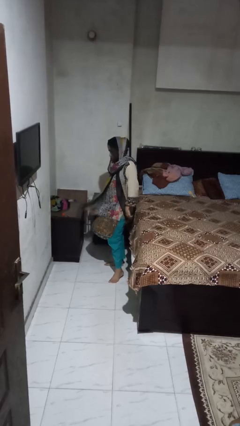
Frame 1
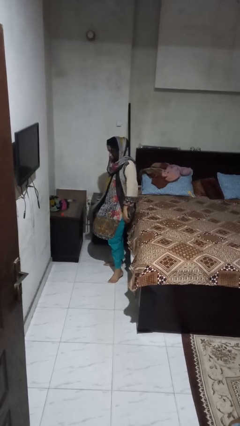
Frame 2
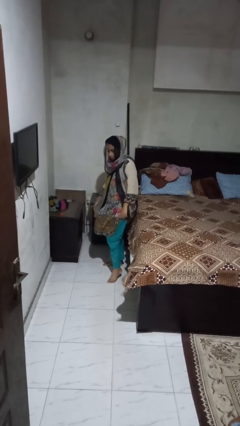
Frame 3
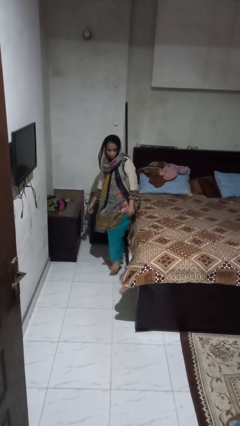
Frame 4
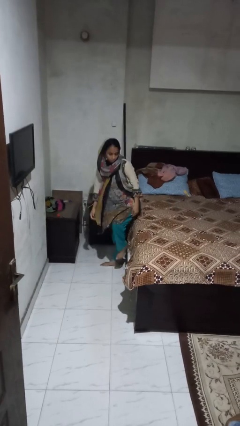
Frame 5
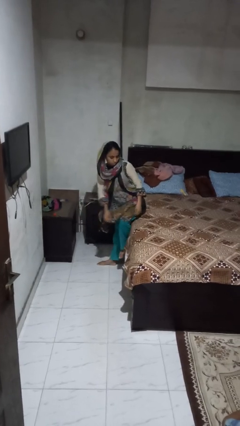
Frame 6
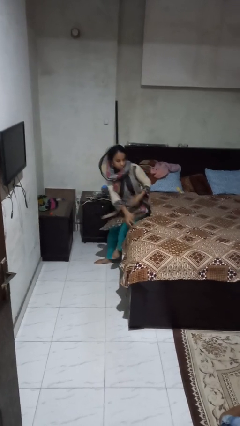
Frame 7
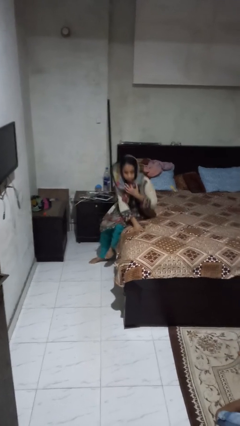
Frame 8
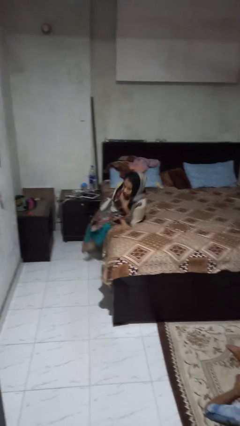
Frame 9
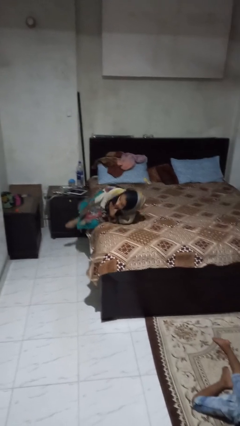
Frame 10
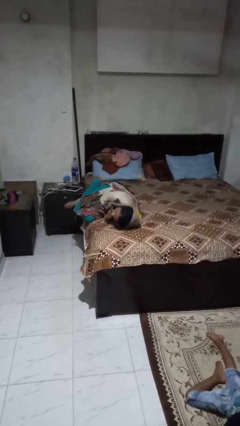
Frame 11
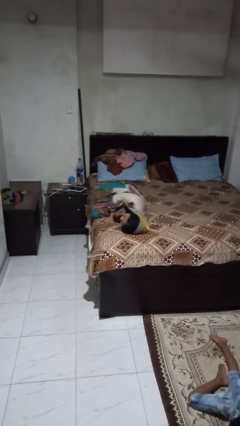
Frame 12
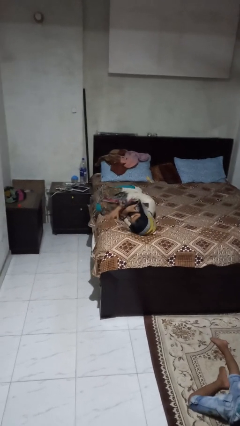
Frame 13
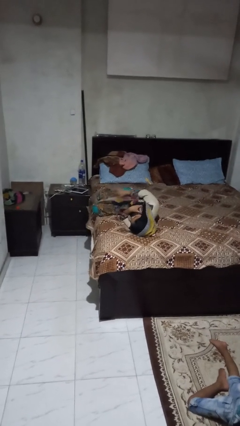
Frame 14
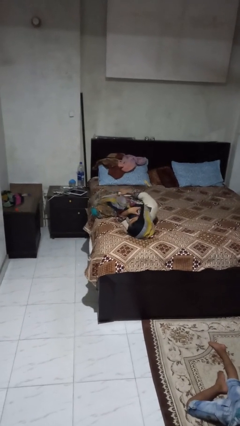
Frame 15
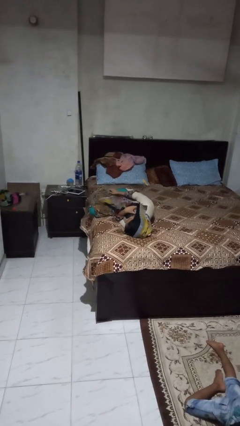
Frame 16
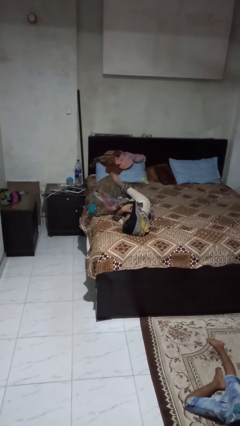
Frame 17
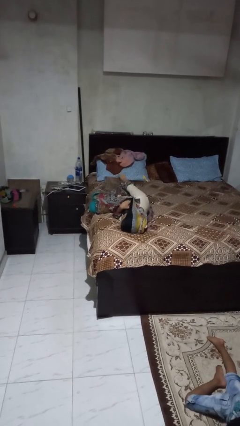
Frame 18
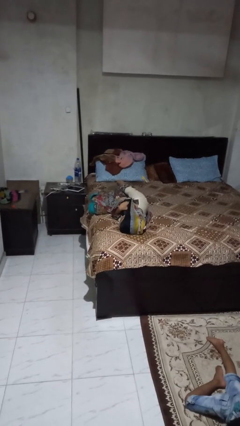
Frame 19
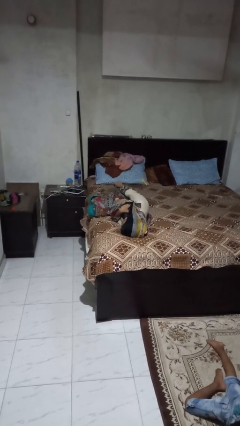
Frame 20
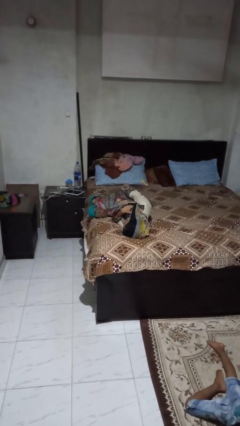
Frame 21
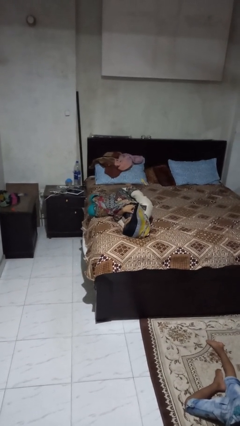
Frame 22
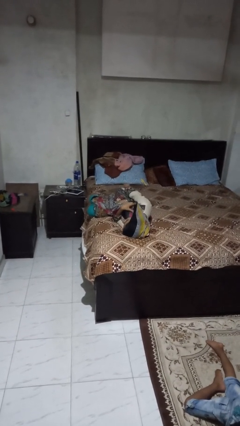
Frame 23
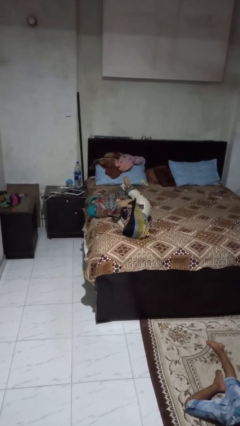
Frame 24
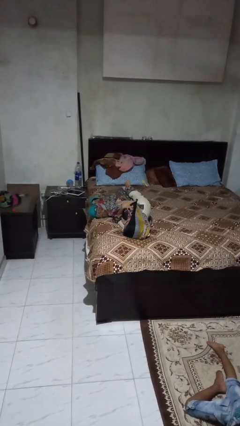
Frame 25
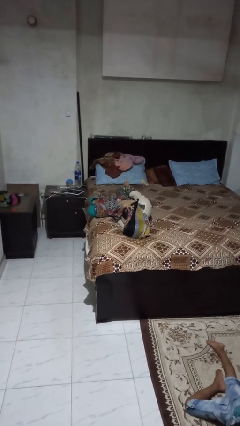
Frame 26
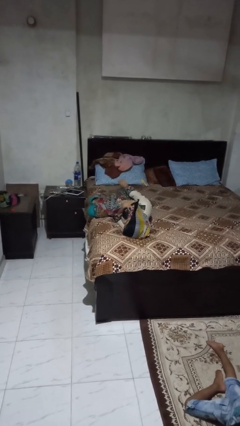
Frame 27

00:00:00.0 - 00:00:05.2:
person lies down on bed

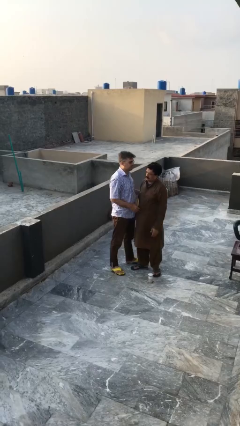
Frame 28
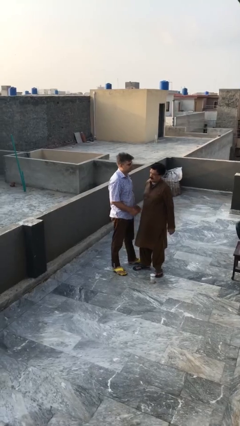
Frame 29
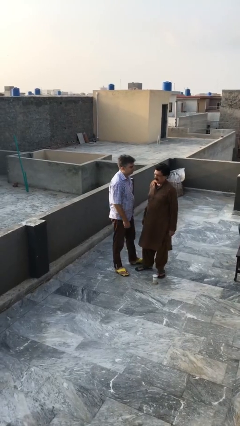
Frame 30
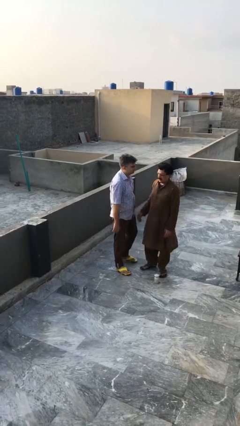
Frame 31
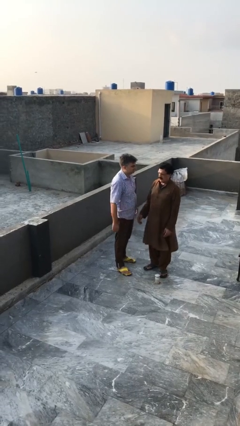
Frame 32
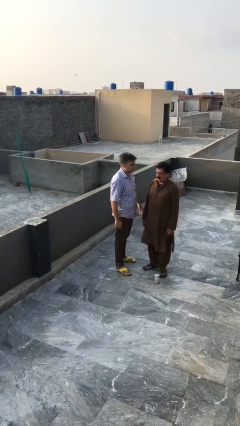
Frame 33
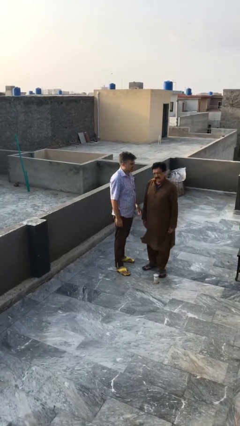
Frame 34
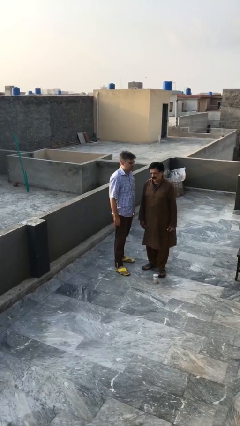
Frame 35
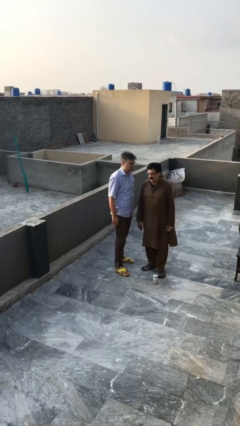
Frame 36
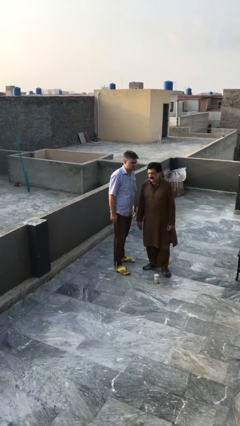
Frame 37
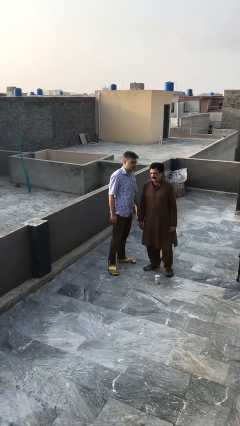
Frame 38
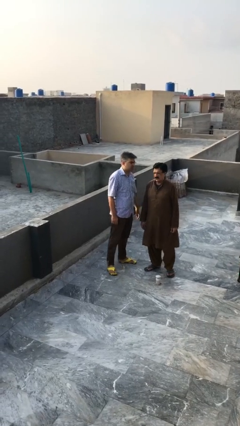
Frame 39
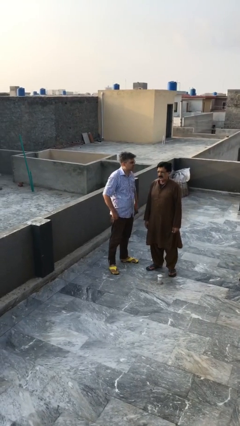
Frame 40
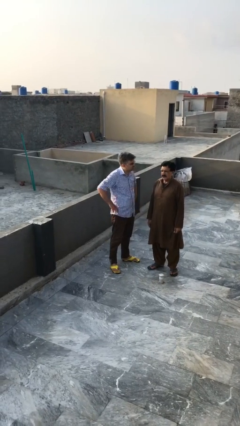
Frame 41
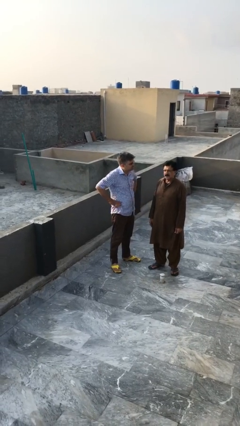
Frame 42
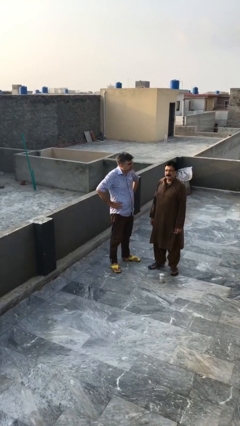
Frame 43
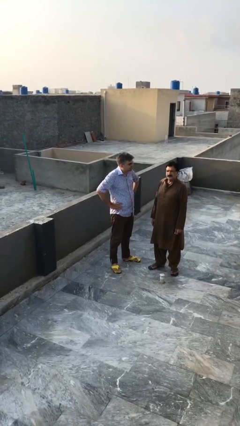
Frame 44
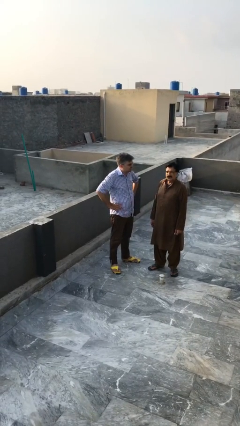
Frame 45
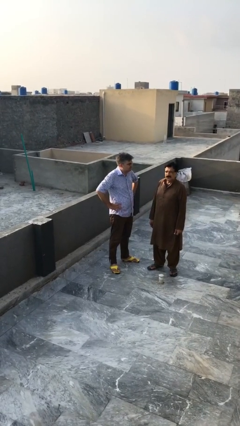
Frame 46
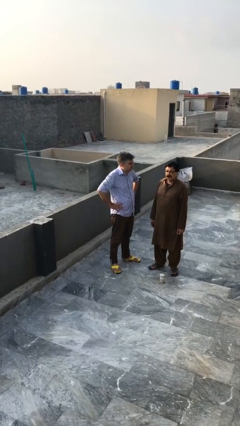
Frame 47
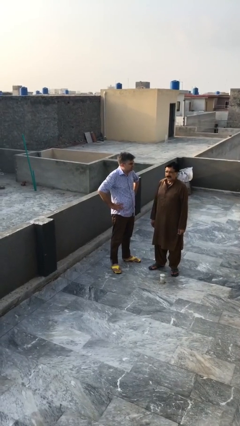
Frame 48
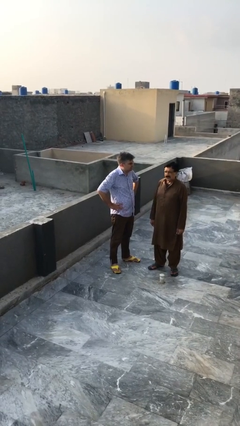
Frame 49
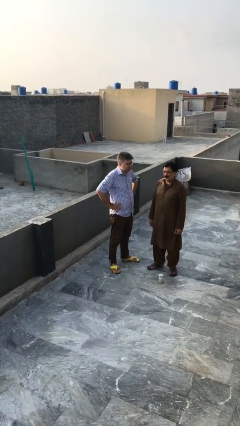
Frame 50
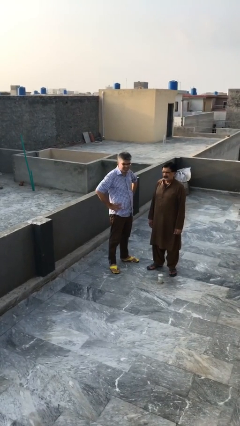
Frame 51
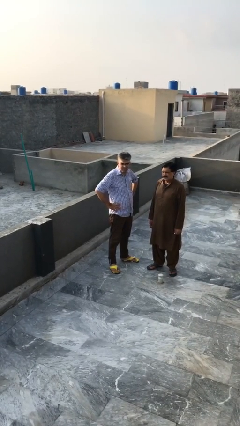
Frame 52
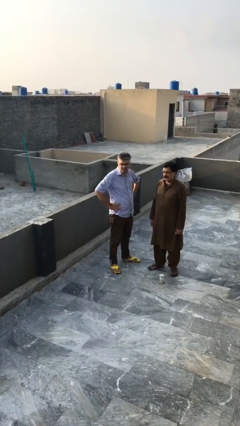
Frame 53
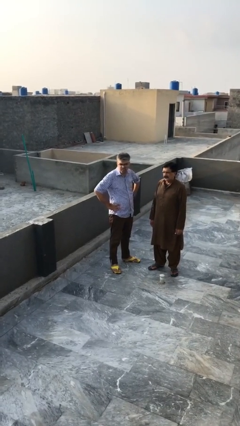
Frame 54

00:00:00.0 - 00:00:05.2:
person talks to person

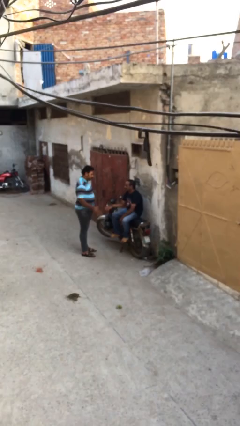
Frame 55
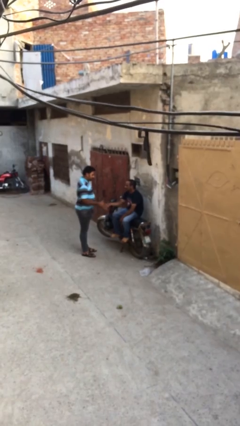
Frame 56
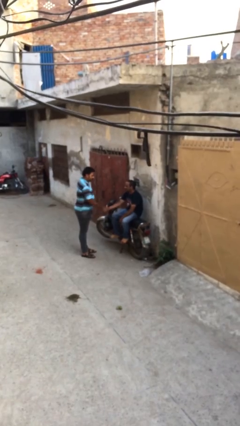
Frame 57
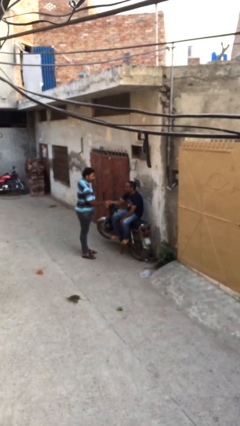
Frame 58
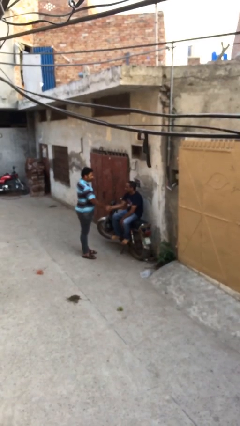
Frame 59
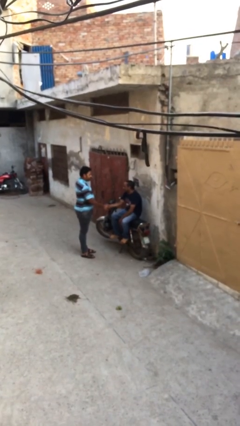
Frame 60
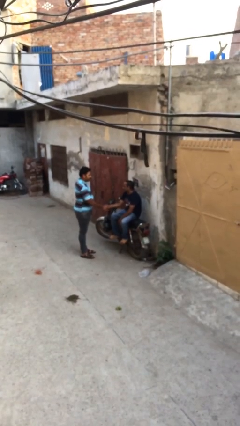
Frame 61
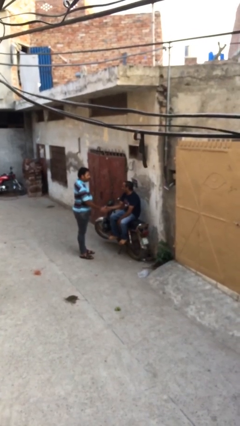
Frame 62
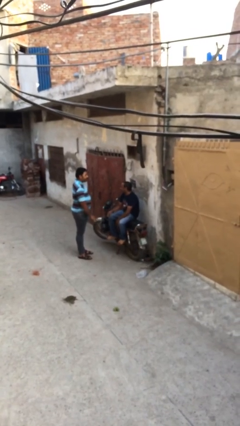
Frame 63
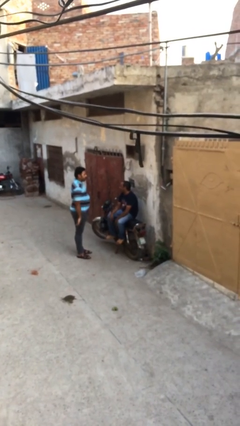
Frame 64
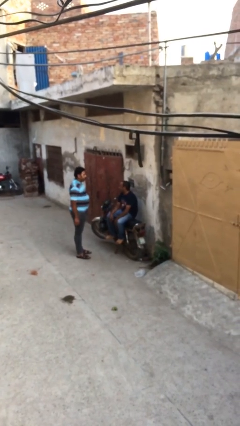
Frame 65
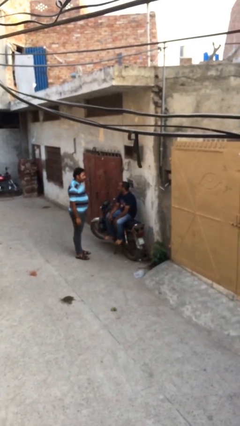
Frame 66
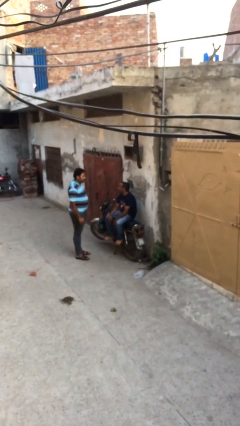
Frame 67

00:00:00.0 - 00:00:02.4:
person shakes hand

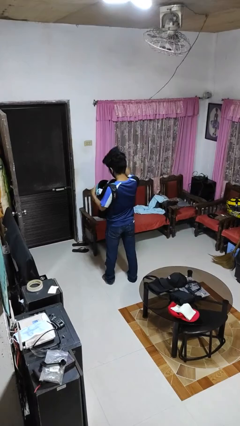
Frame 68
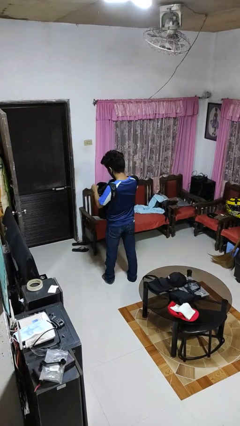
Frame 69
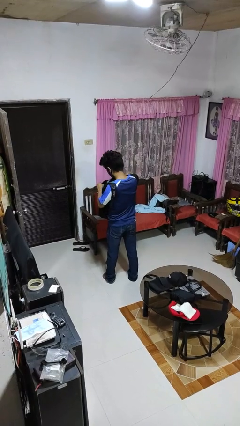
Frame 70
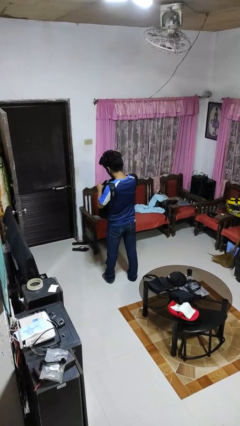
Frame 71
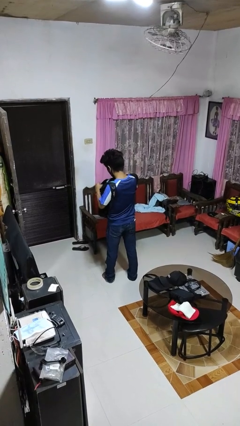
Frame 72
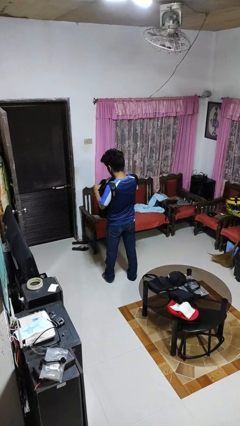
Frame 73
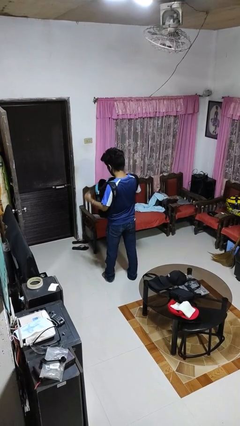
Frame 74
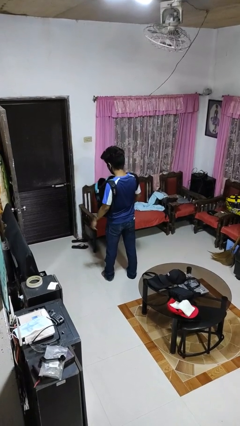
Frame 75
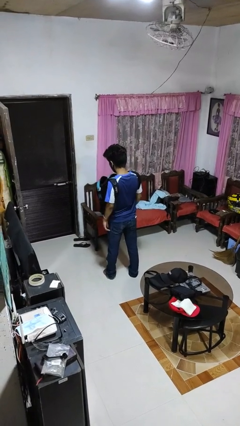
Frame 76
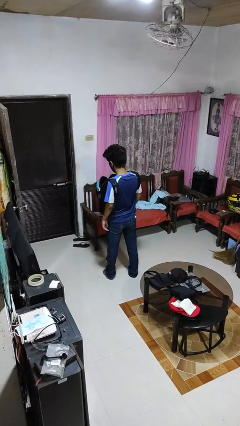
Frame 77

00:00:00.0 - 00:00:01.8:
person puts object into backpack

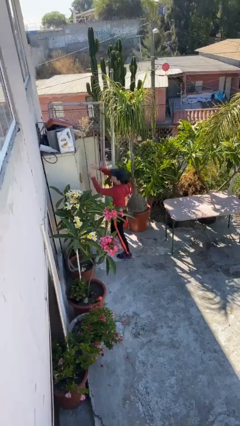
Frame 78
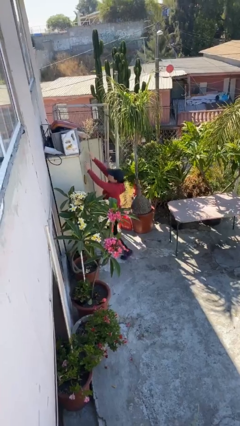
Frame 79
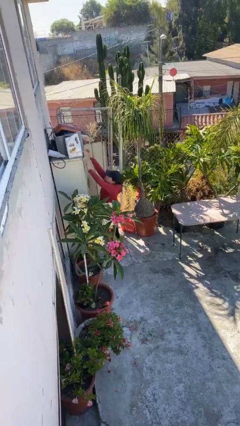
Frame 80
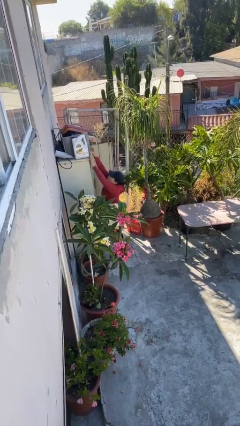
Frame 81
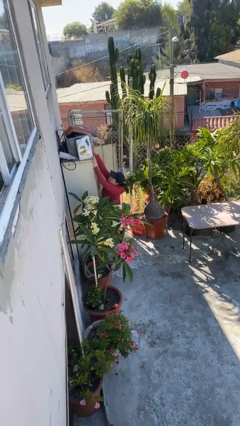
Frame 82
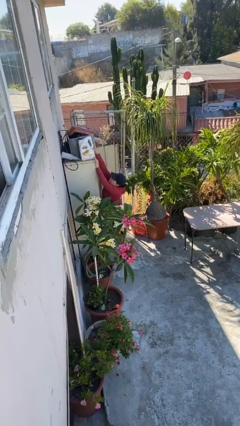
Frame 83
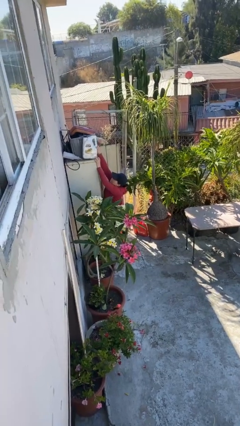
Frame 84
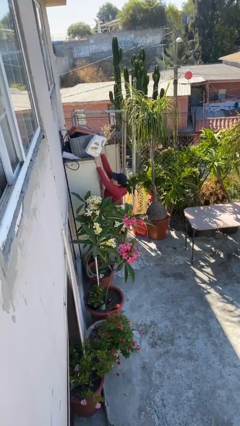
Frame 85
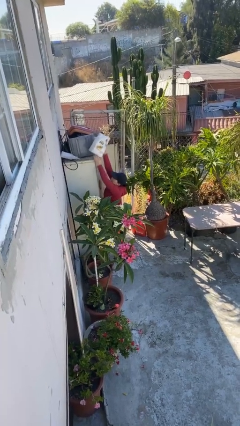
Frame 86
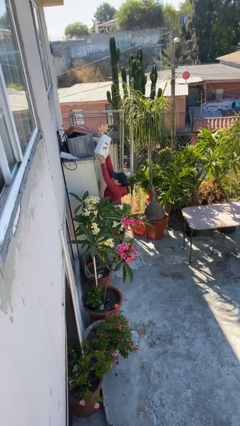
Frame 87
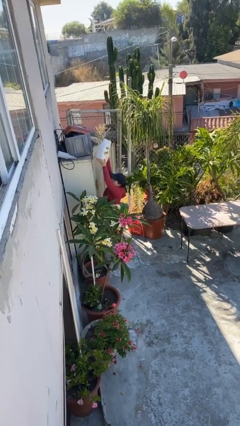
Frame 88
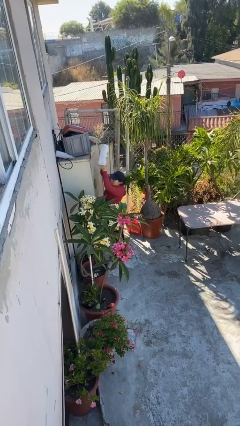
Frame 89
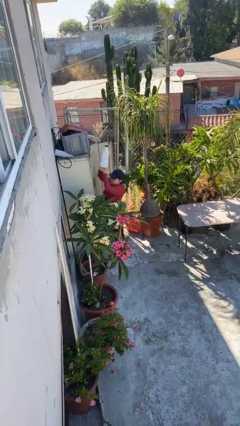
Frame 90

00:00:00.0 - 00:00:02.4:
person picks up object from shelf

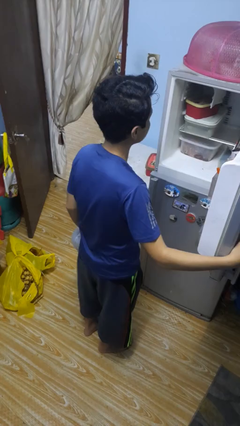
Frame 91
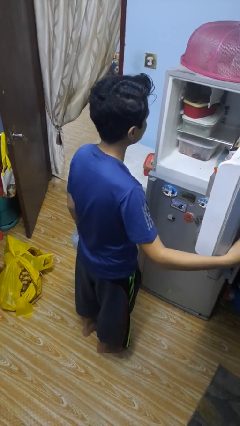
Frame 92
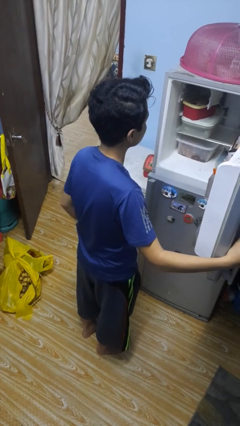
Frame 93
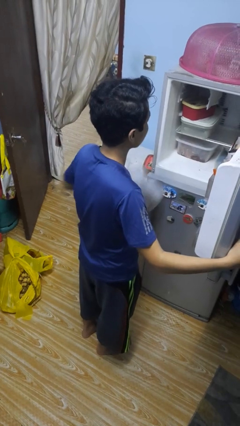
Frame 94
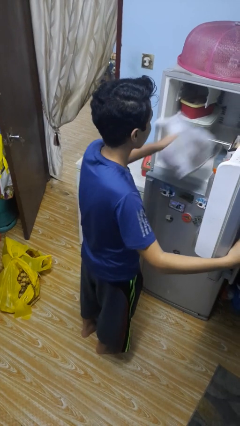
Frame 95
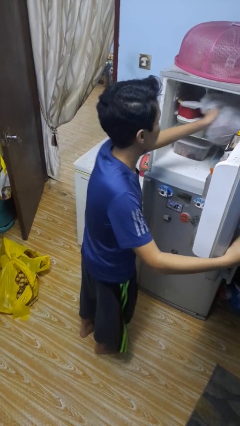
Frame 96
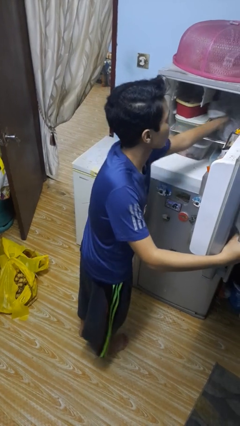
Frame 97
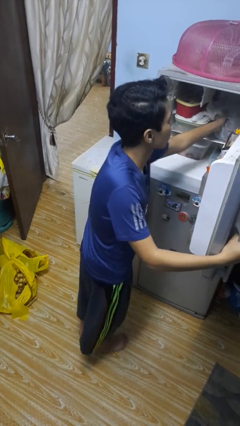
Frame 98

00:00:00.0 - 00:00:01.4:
person loads groceries into refrigerator
